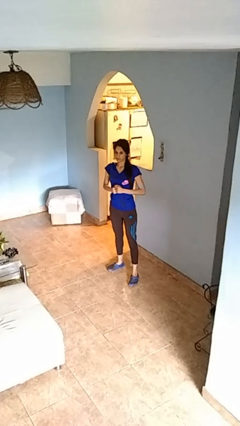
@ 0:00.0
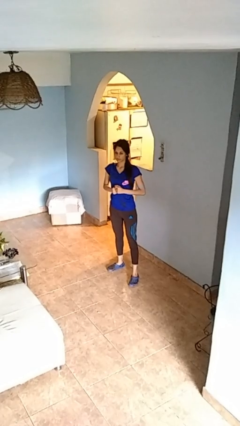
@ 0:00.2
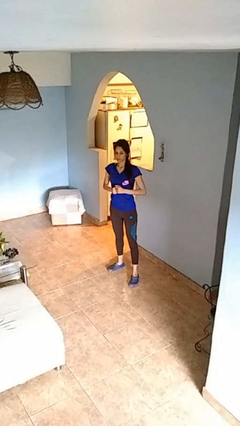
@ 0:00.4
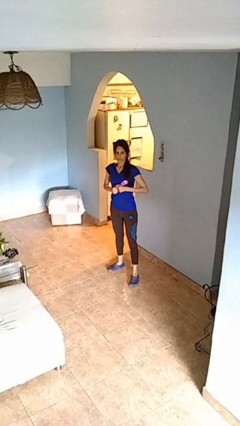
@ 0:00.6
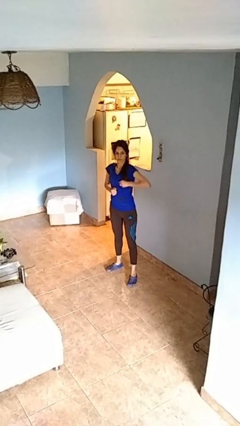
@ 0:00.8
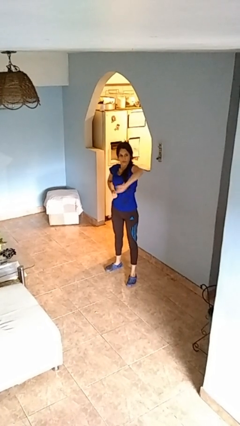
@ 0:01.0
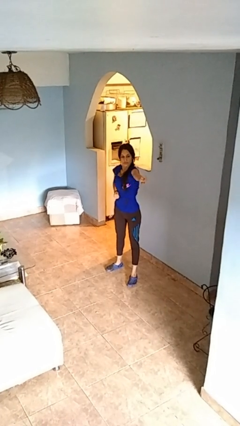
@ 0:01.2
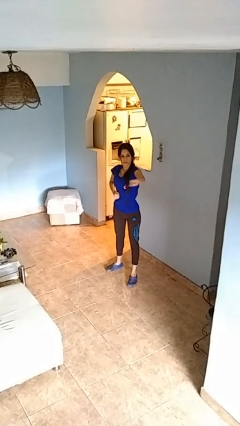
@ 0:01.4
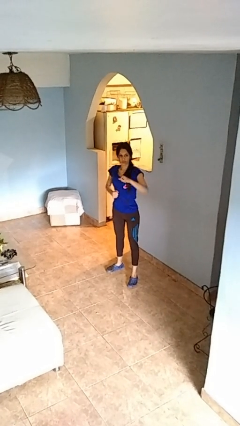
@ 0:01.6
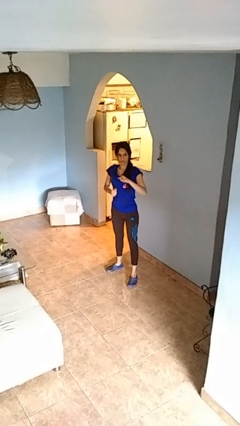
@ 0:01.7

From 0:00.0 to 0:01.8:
person punches

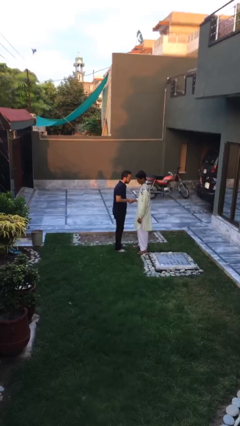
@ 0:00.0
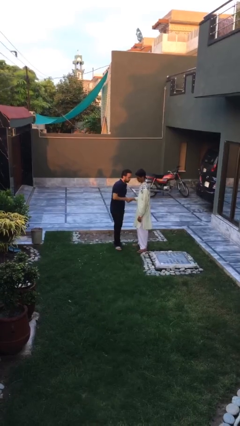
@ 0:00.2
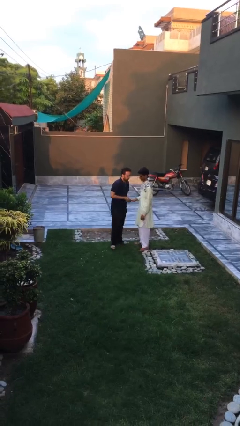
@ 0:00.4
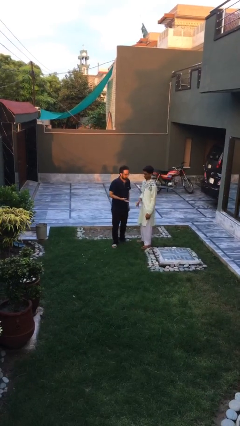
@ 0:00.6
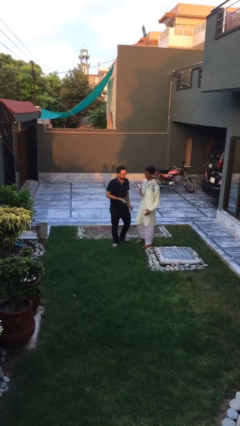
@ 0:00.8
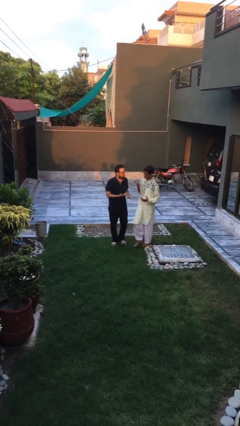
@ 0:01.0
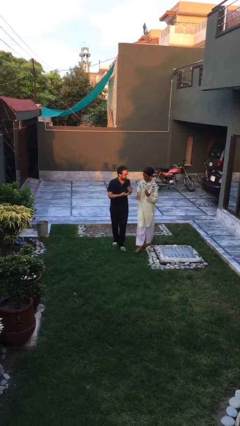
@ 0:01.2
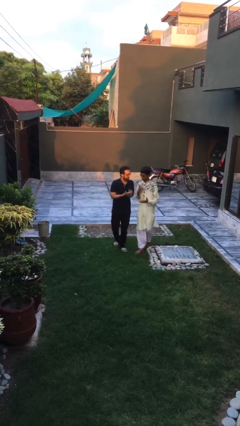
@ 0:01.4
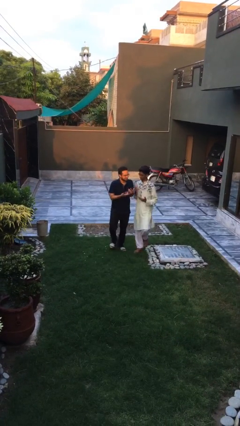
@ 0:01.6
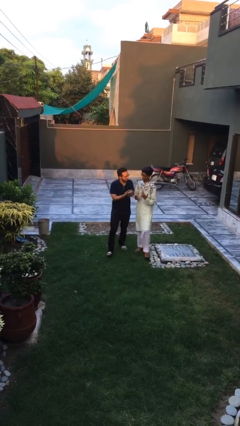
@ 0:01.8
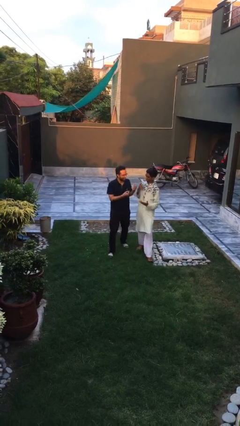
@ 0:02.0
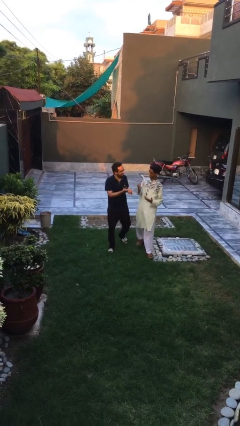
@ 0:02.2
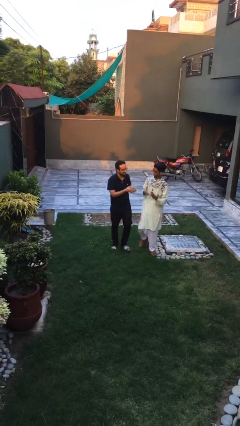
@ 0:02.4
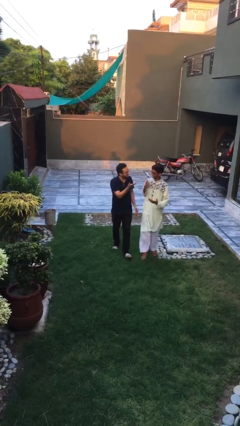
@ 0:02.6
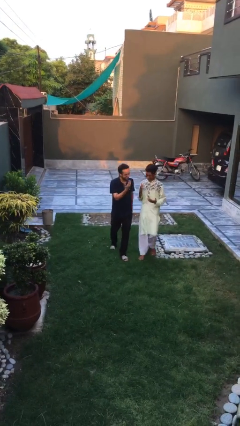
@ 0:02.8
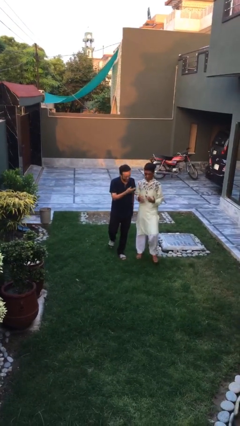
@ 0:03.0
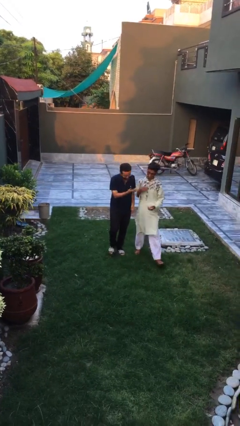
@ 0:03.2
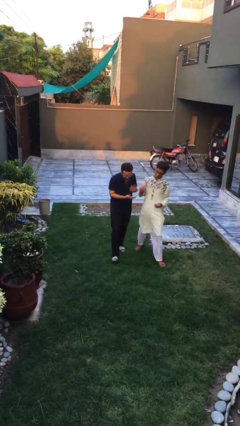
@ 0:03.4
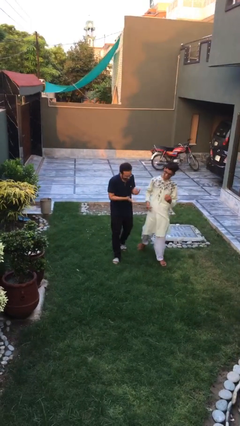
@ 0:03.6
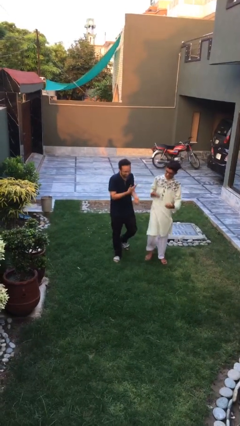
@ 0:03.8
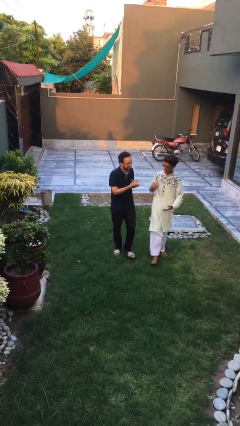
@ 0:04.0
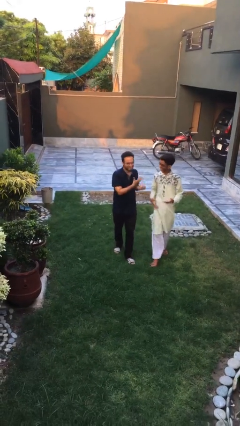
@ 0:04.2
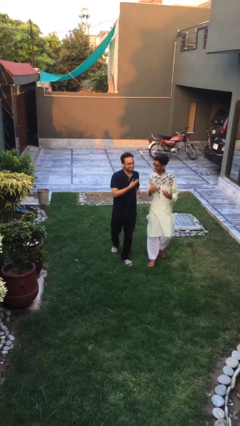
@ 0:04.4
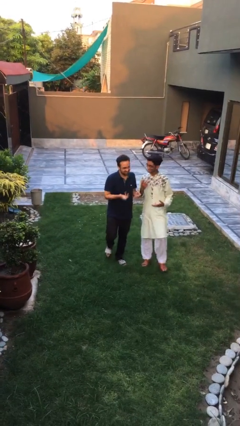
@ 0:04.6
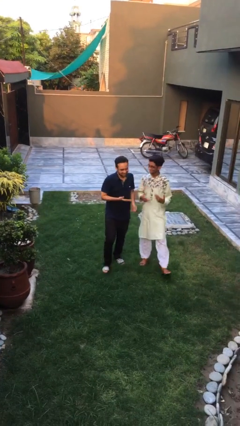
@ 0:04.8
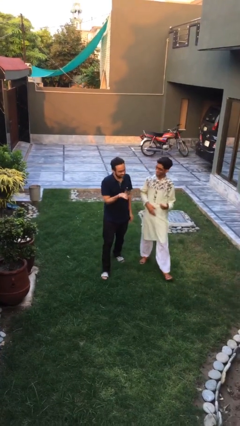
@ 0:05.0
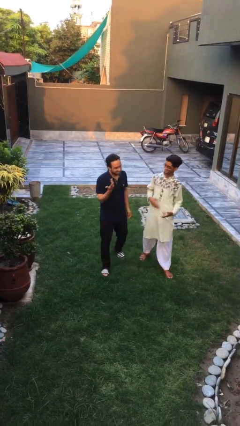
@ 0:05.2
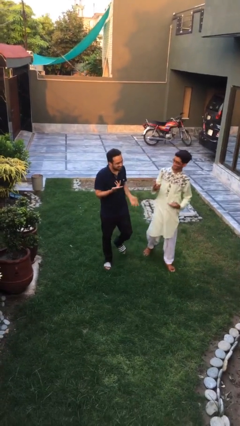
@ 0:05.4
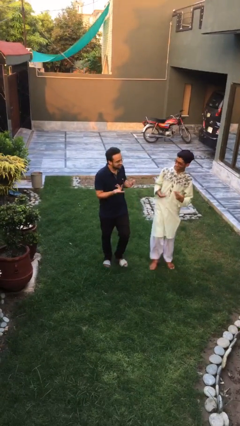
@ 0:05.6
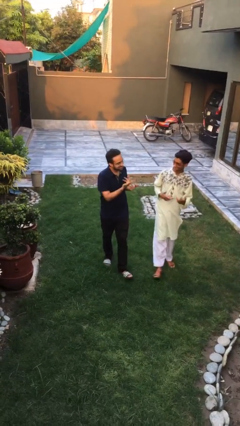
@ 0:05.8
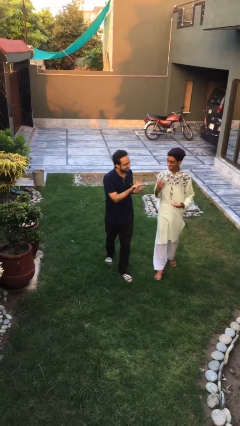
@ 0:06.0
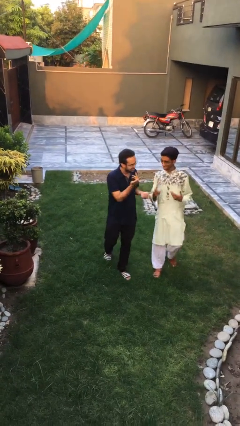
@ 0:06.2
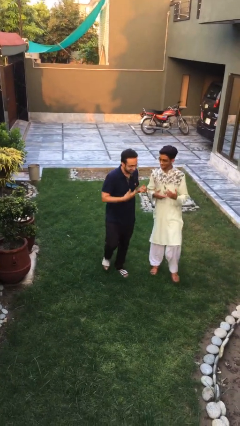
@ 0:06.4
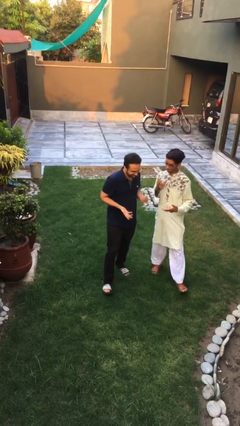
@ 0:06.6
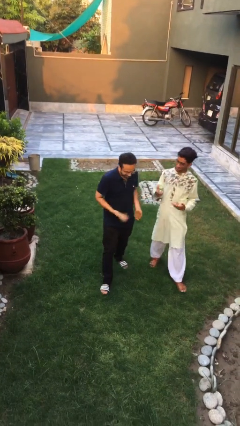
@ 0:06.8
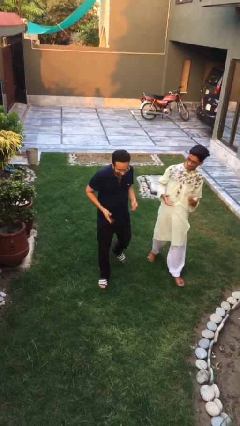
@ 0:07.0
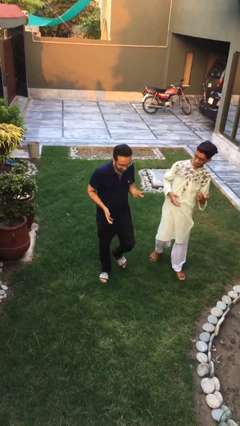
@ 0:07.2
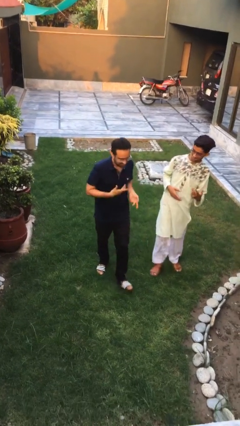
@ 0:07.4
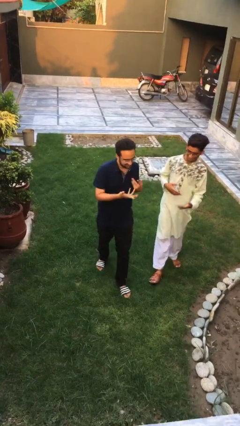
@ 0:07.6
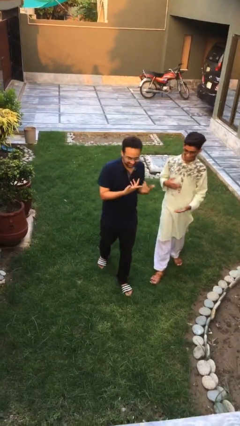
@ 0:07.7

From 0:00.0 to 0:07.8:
person talks to person

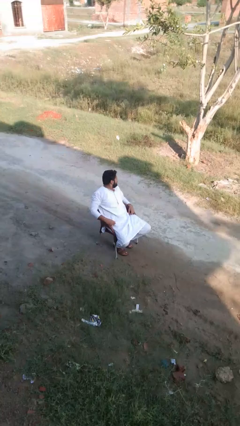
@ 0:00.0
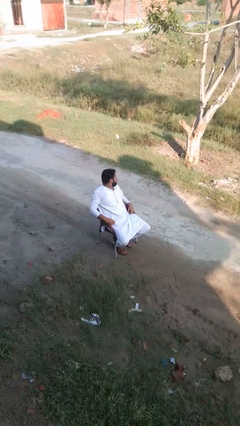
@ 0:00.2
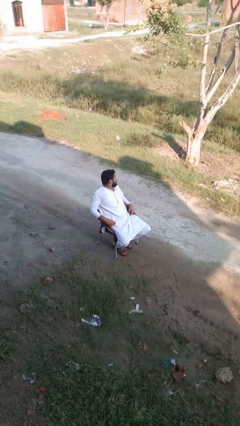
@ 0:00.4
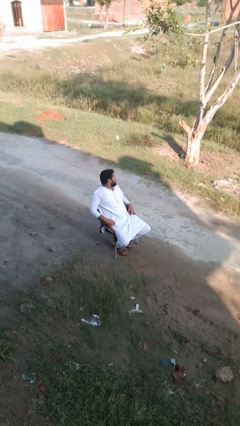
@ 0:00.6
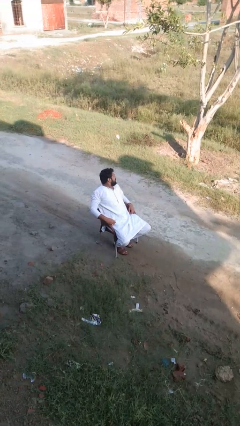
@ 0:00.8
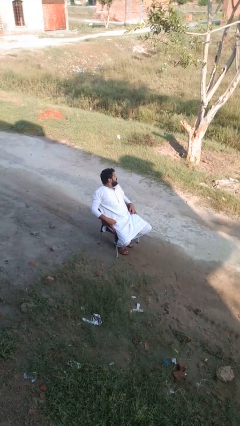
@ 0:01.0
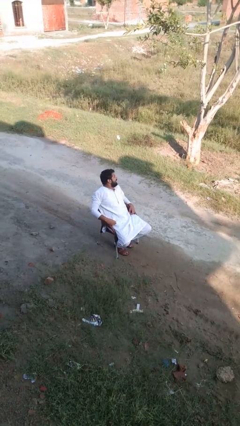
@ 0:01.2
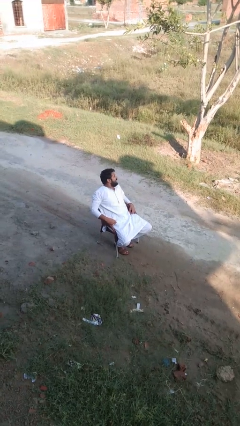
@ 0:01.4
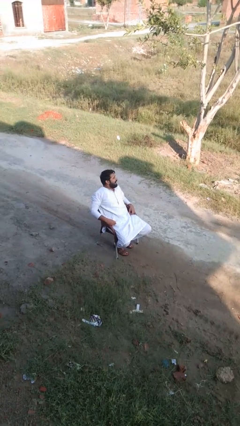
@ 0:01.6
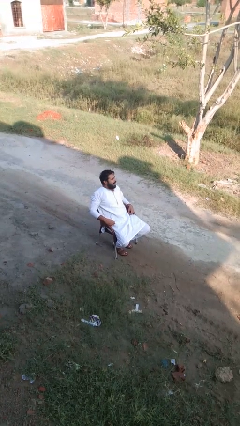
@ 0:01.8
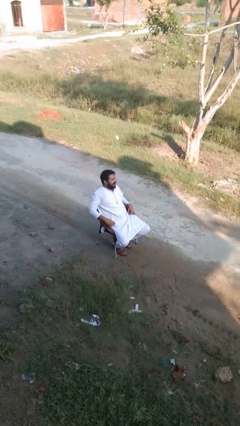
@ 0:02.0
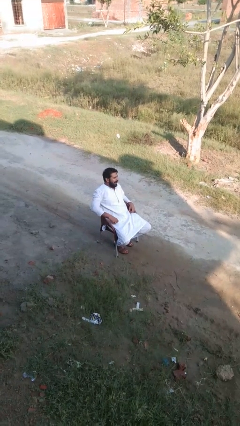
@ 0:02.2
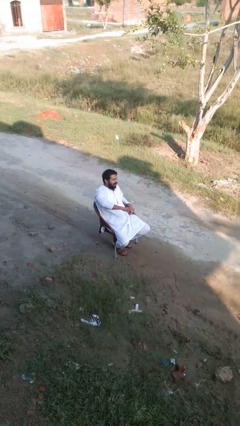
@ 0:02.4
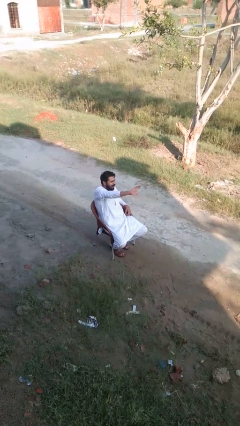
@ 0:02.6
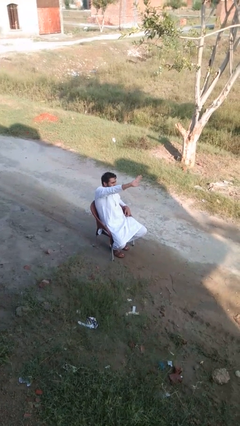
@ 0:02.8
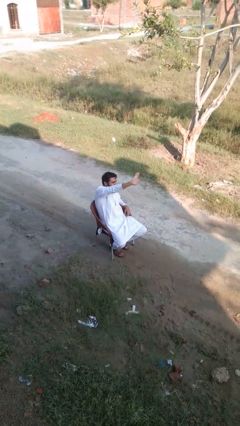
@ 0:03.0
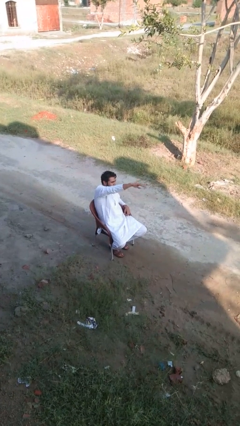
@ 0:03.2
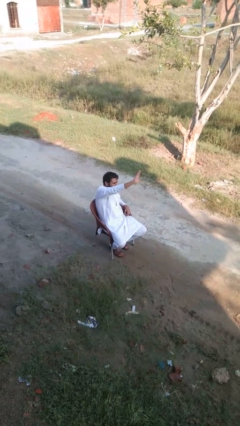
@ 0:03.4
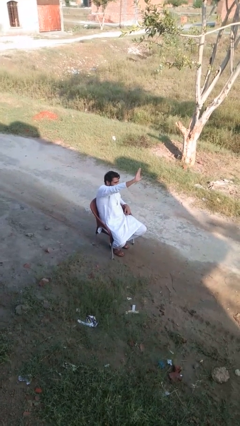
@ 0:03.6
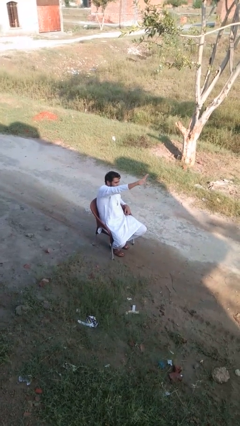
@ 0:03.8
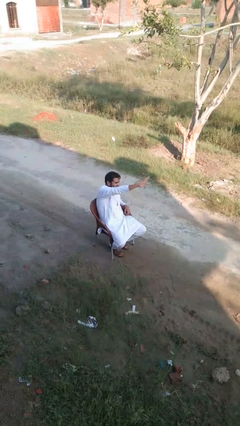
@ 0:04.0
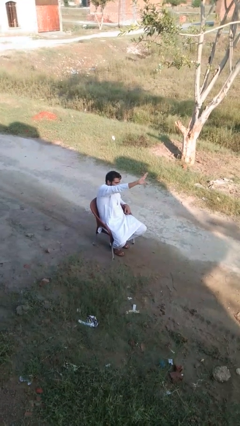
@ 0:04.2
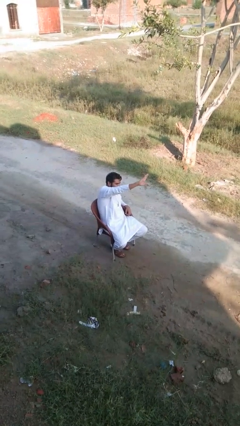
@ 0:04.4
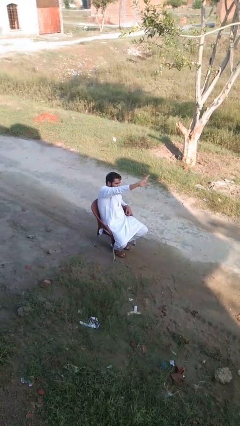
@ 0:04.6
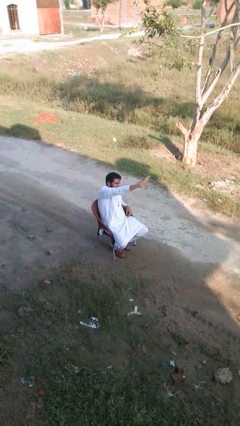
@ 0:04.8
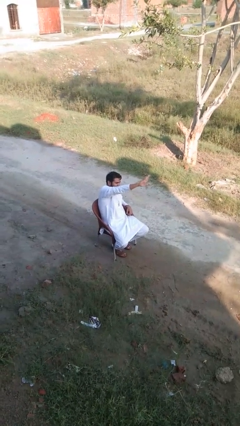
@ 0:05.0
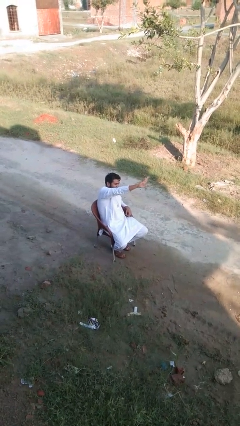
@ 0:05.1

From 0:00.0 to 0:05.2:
person gestures stop

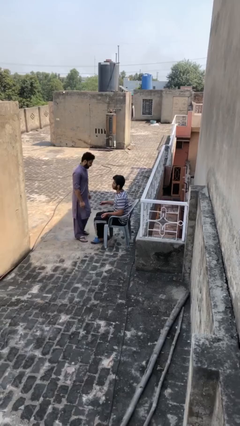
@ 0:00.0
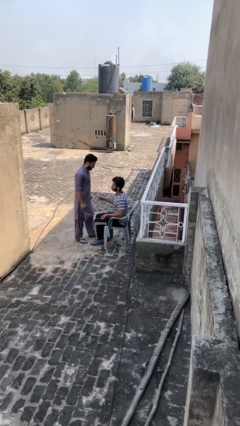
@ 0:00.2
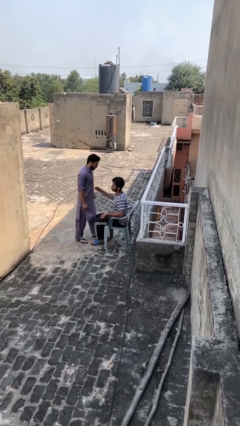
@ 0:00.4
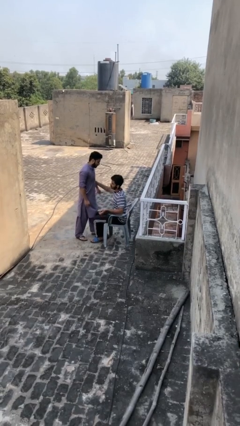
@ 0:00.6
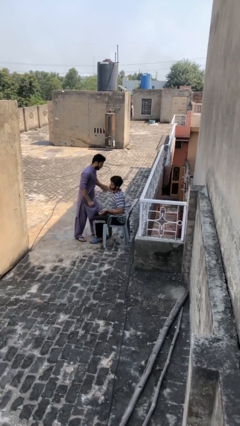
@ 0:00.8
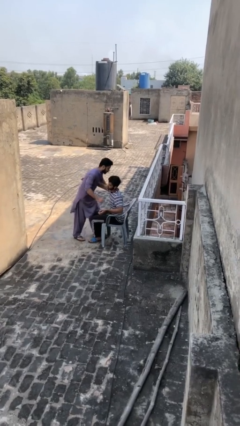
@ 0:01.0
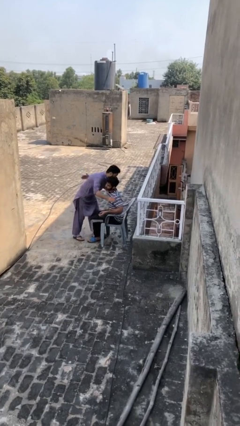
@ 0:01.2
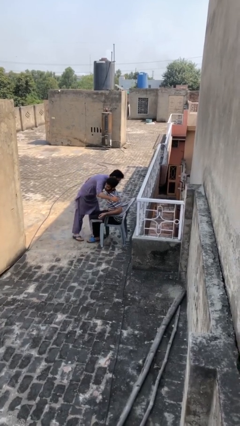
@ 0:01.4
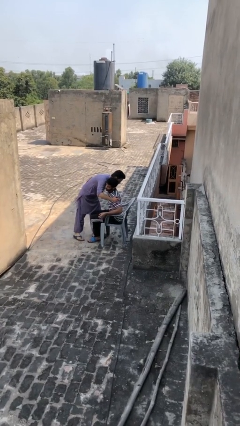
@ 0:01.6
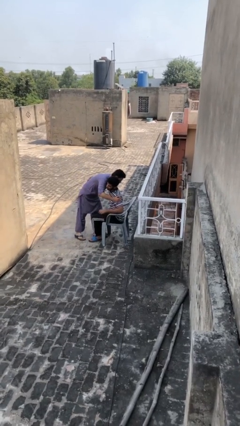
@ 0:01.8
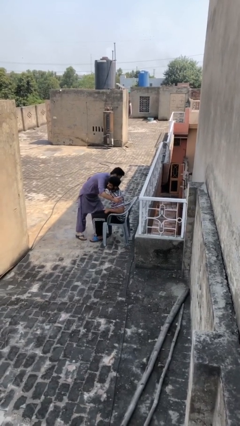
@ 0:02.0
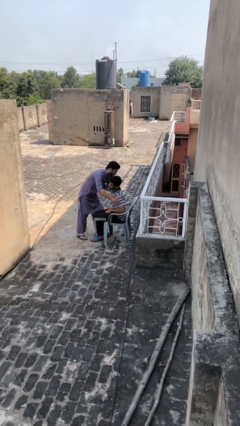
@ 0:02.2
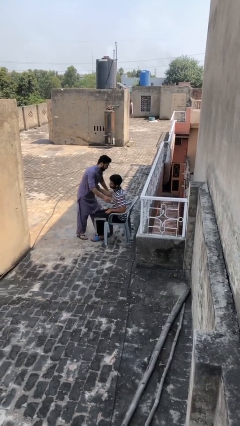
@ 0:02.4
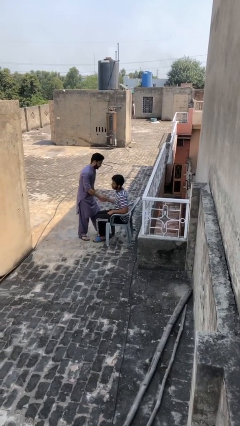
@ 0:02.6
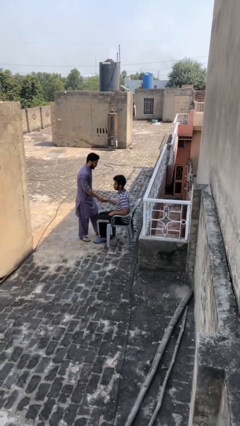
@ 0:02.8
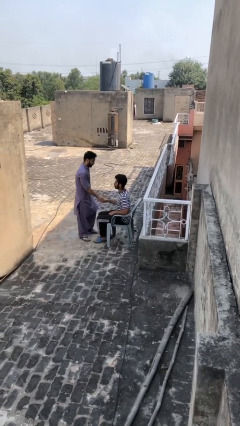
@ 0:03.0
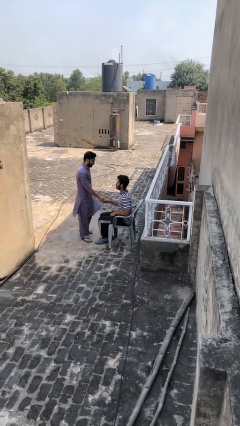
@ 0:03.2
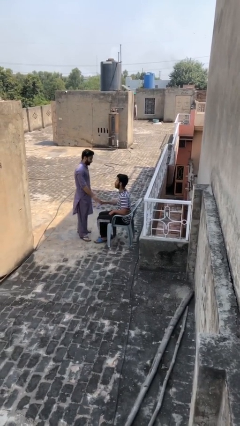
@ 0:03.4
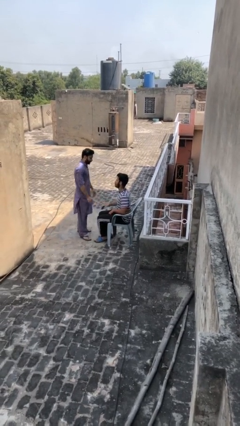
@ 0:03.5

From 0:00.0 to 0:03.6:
person embraces person
